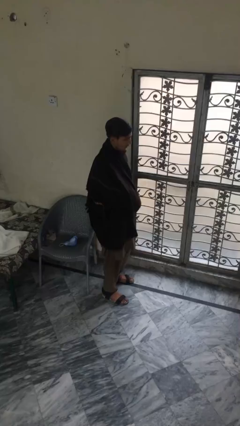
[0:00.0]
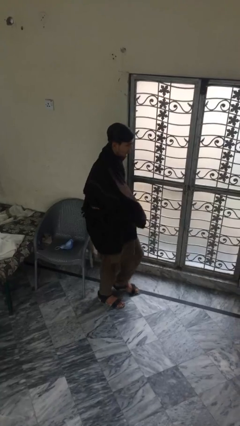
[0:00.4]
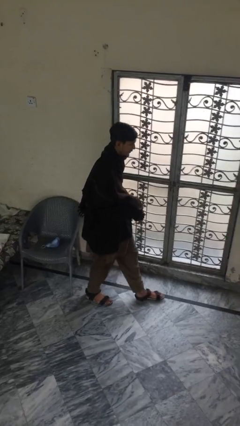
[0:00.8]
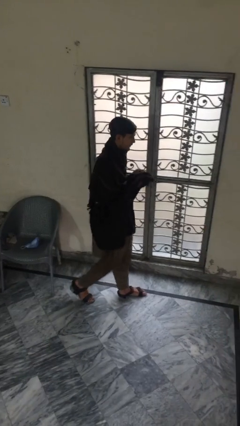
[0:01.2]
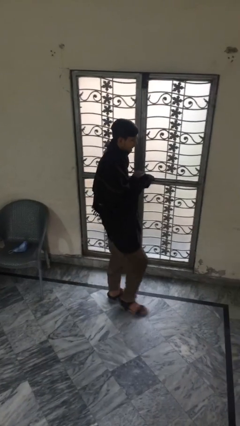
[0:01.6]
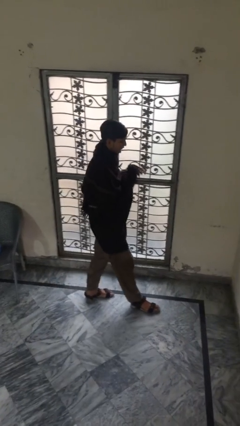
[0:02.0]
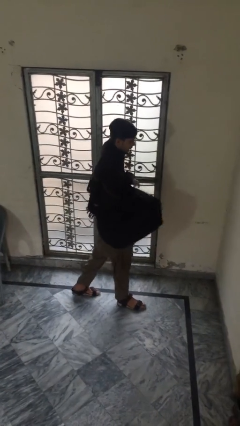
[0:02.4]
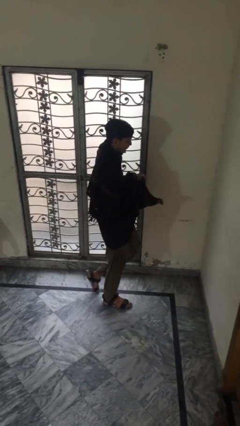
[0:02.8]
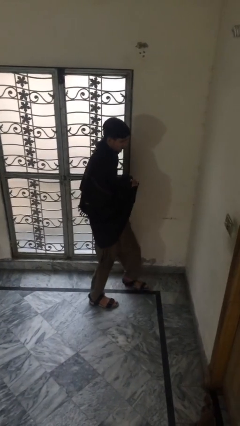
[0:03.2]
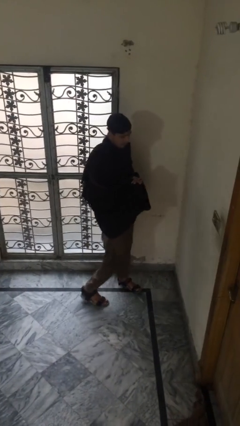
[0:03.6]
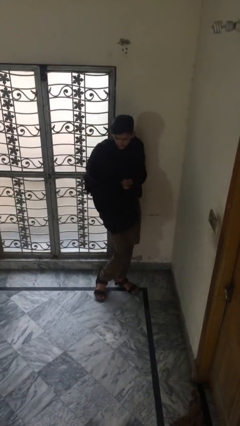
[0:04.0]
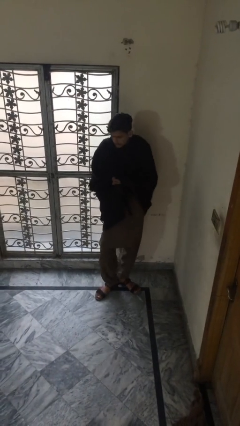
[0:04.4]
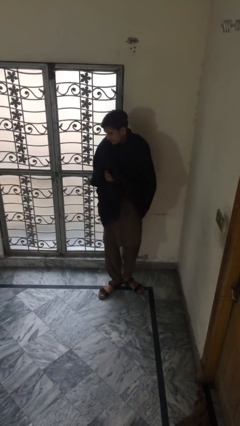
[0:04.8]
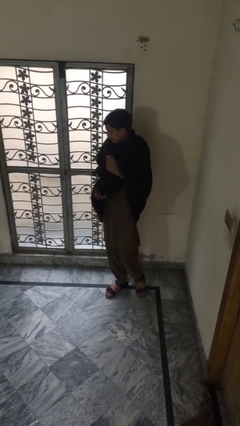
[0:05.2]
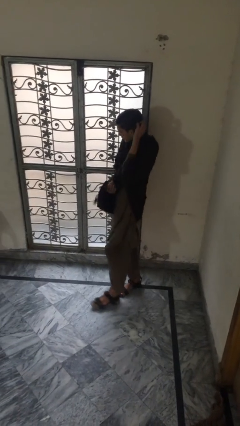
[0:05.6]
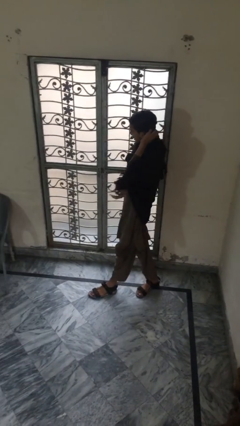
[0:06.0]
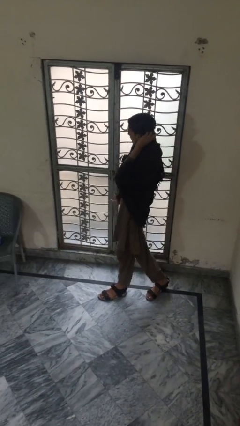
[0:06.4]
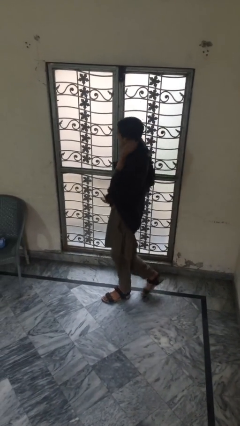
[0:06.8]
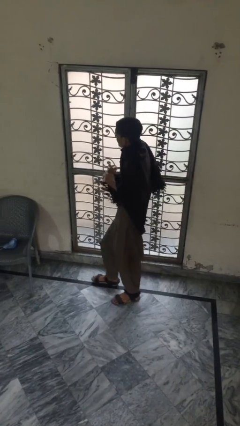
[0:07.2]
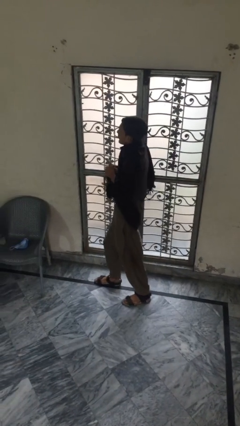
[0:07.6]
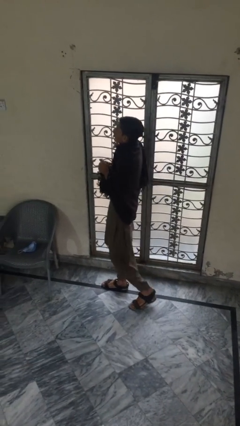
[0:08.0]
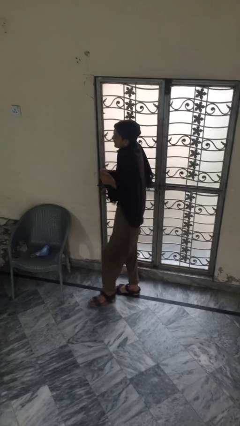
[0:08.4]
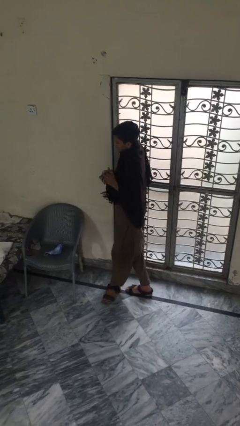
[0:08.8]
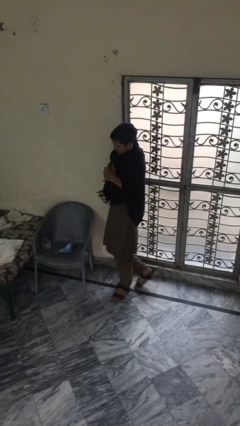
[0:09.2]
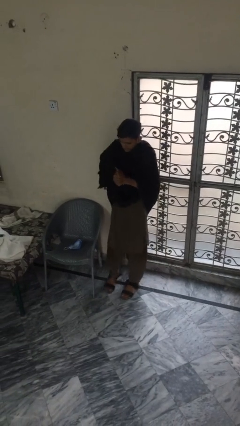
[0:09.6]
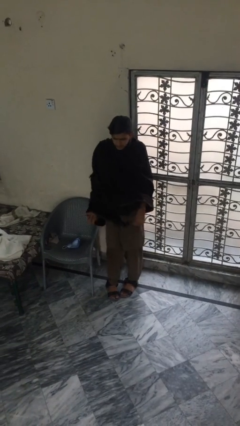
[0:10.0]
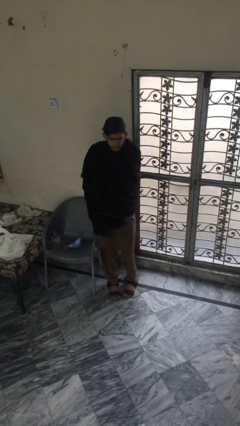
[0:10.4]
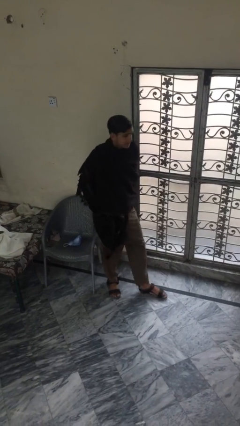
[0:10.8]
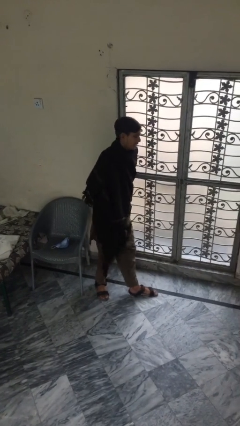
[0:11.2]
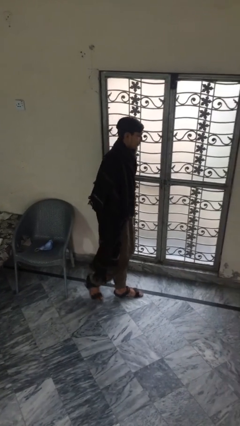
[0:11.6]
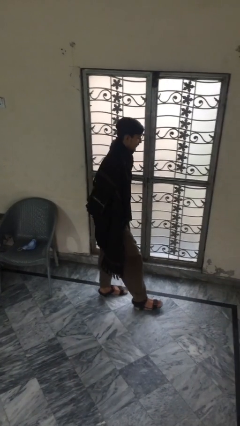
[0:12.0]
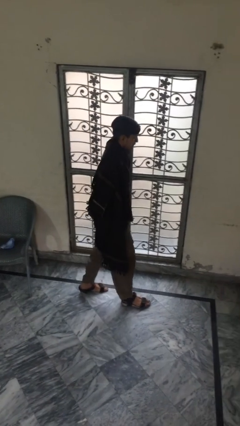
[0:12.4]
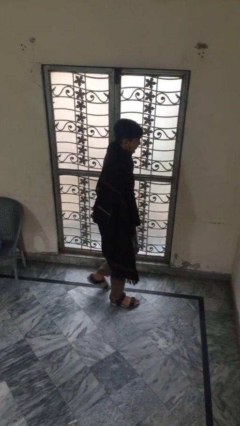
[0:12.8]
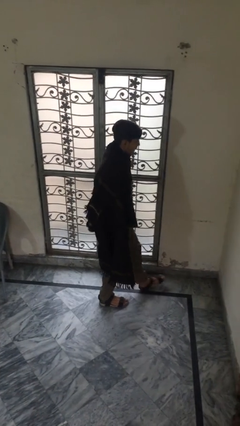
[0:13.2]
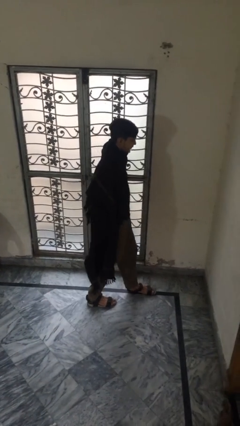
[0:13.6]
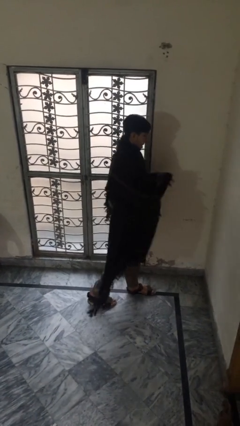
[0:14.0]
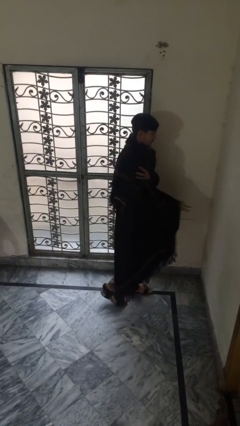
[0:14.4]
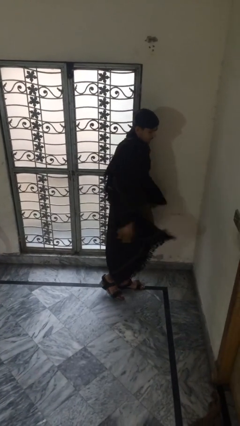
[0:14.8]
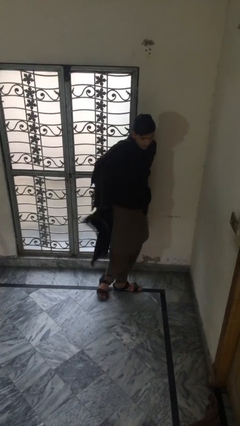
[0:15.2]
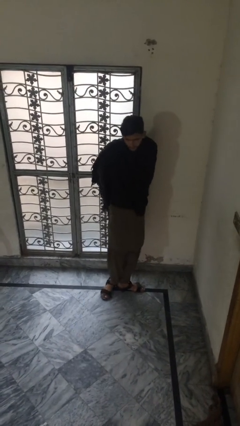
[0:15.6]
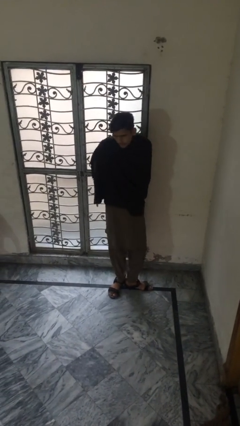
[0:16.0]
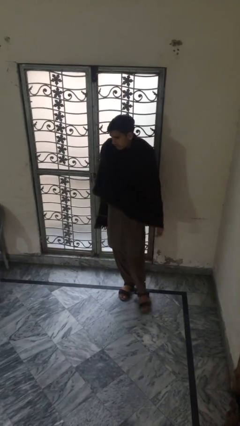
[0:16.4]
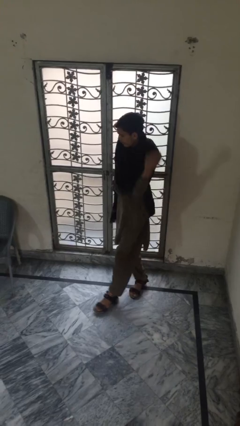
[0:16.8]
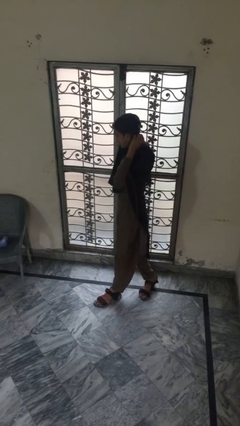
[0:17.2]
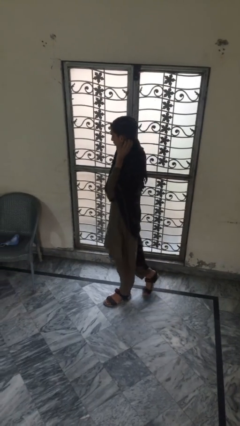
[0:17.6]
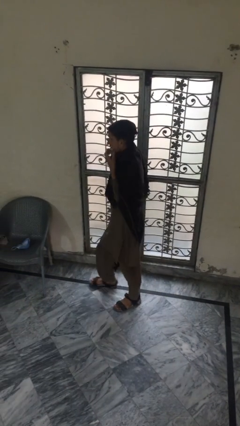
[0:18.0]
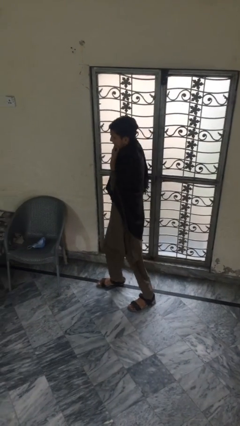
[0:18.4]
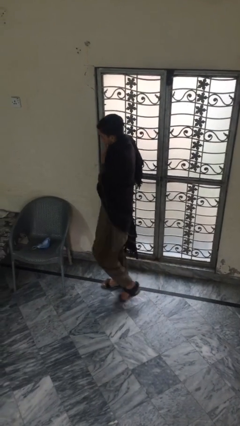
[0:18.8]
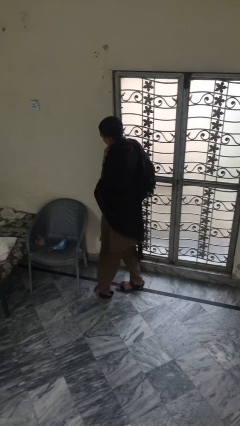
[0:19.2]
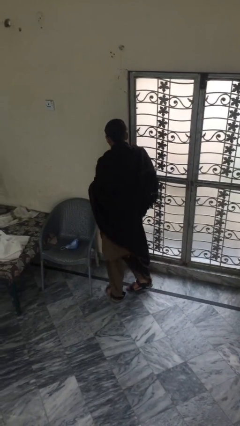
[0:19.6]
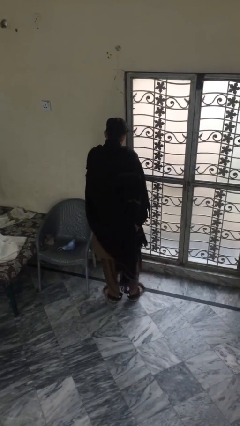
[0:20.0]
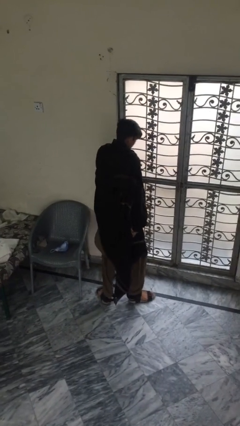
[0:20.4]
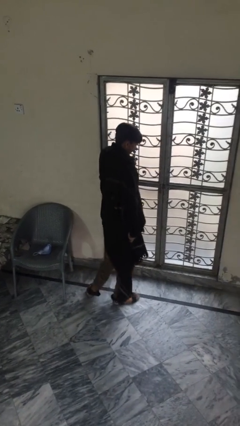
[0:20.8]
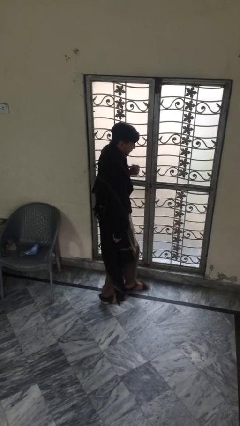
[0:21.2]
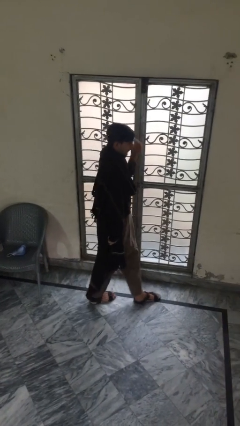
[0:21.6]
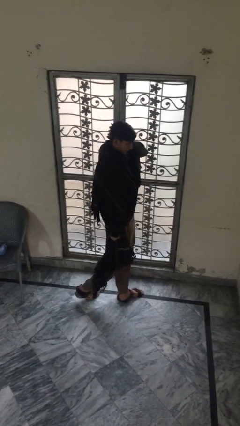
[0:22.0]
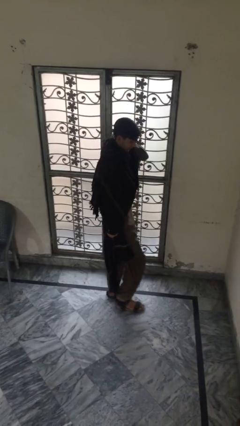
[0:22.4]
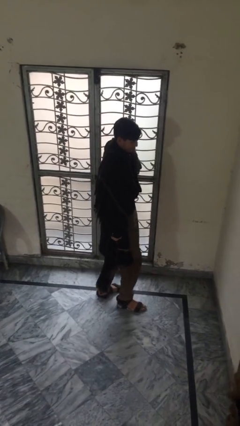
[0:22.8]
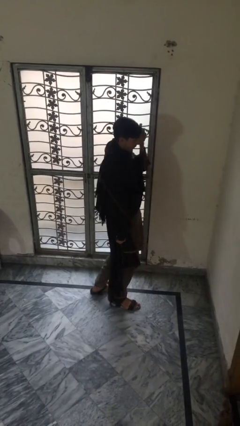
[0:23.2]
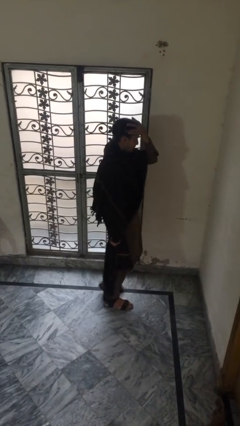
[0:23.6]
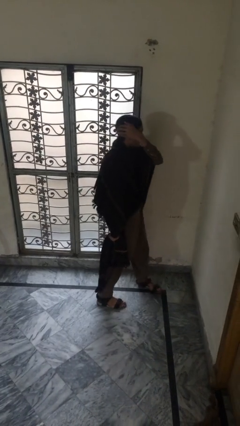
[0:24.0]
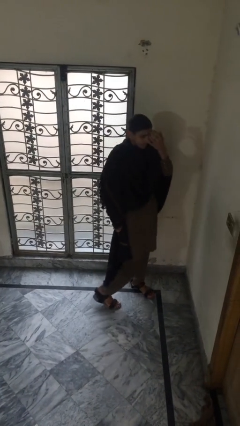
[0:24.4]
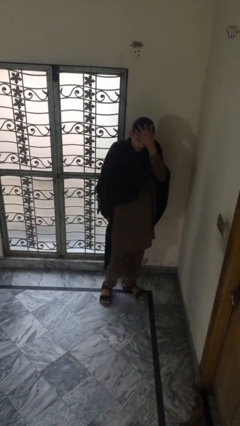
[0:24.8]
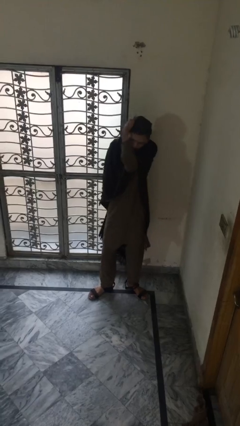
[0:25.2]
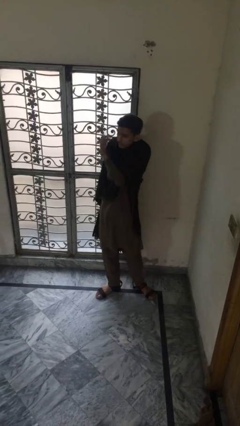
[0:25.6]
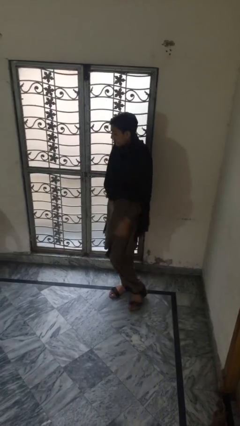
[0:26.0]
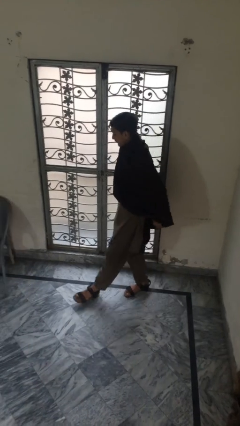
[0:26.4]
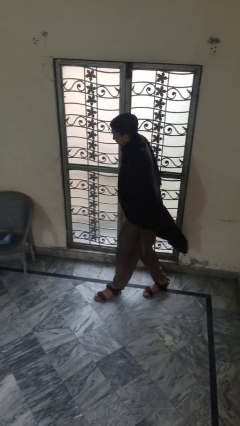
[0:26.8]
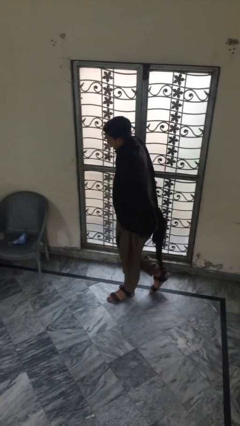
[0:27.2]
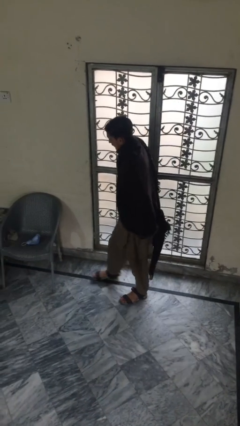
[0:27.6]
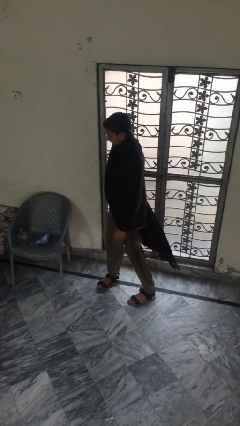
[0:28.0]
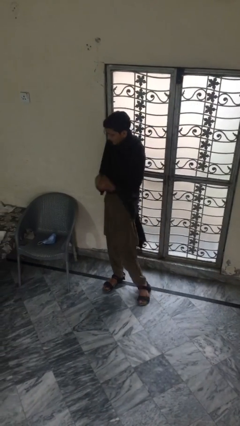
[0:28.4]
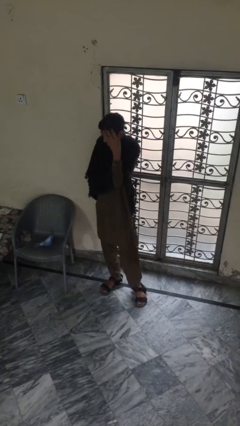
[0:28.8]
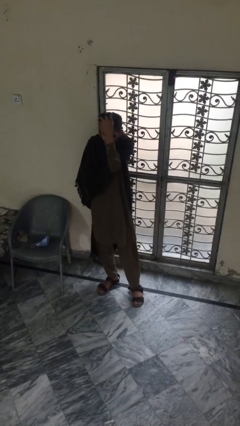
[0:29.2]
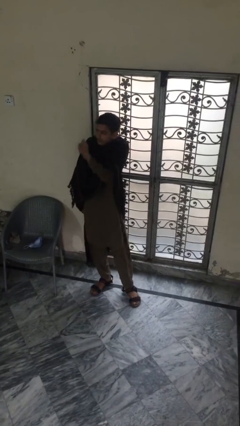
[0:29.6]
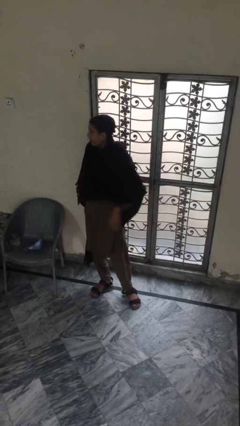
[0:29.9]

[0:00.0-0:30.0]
person walks

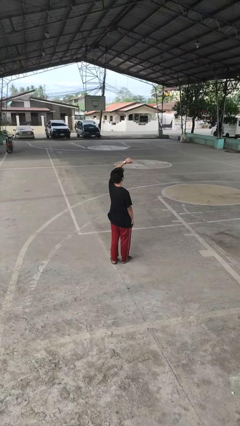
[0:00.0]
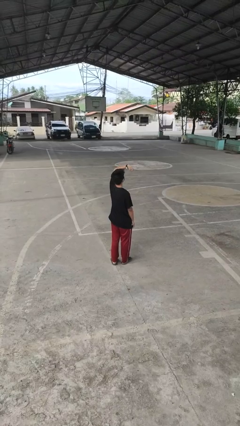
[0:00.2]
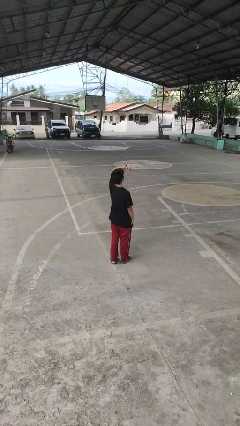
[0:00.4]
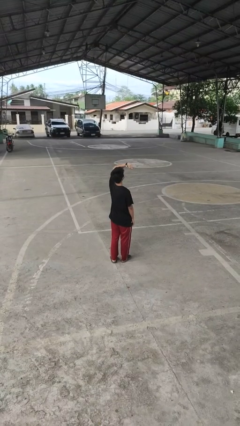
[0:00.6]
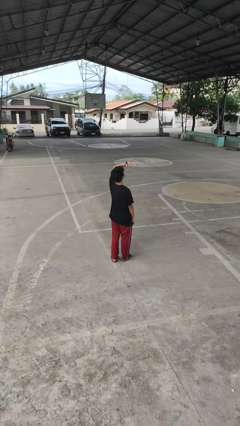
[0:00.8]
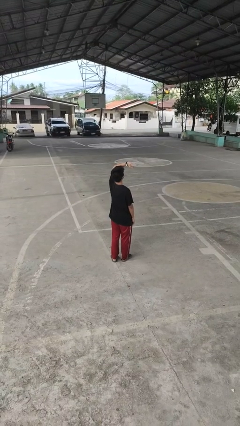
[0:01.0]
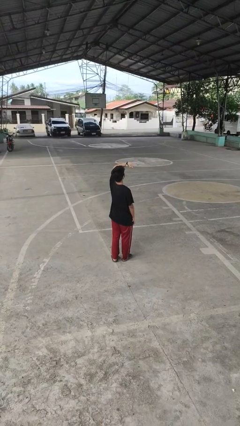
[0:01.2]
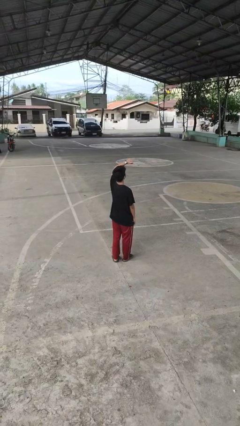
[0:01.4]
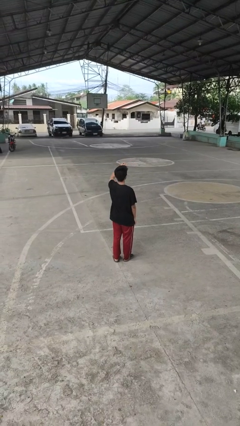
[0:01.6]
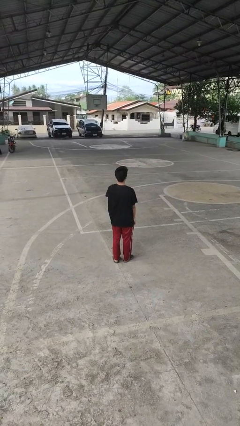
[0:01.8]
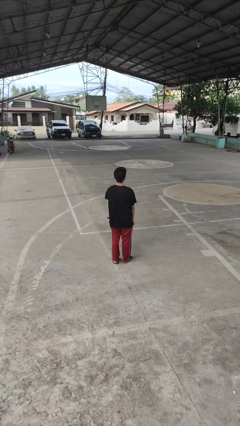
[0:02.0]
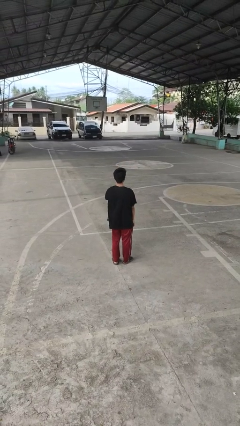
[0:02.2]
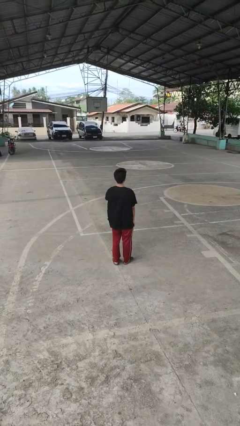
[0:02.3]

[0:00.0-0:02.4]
person looks at wristwatch

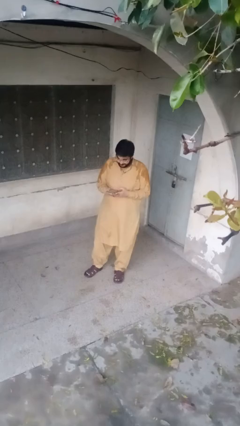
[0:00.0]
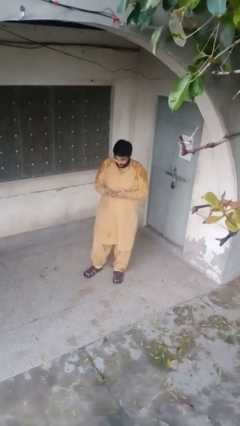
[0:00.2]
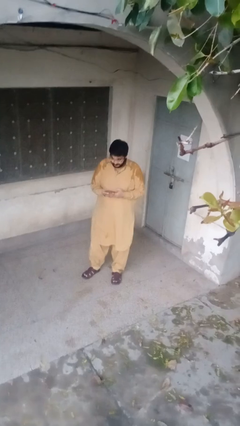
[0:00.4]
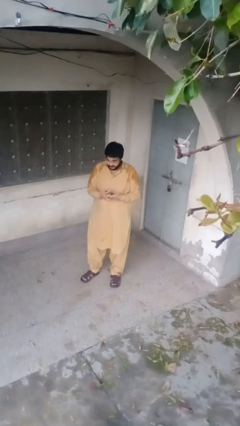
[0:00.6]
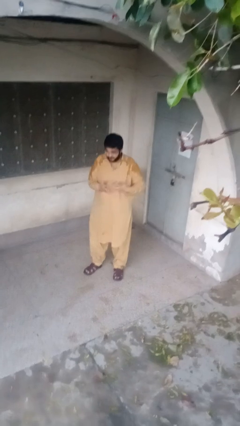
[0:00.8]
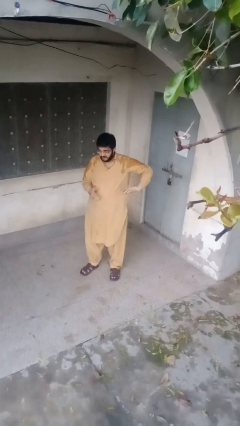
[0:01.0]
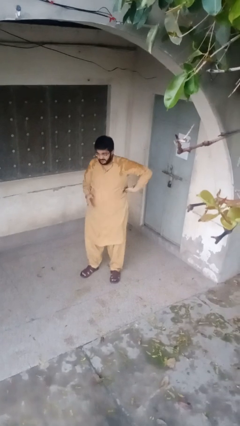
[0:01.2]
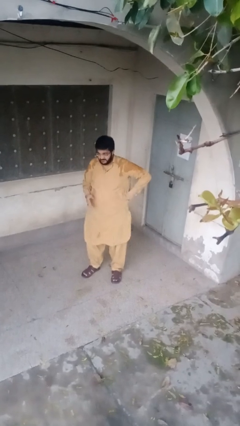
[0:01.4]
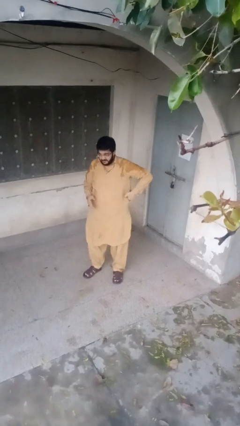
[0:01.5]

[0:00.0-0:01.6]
person puts phone into pocket
